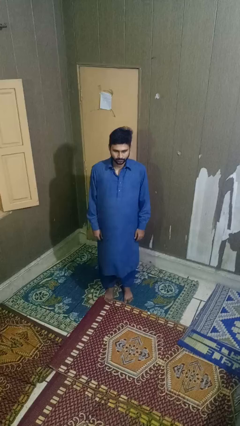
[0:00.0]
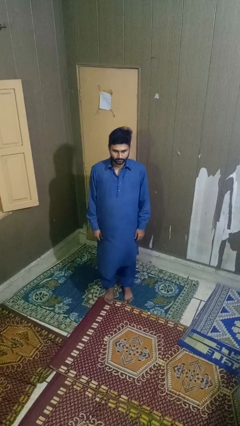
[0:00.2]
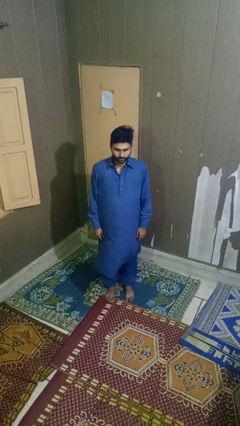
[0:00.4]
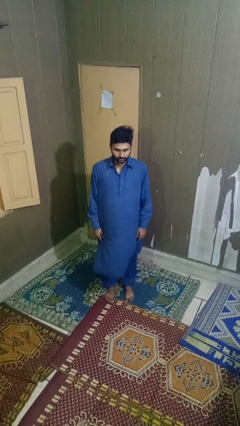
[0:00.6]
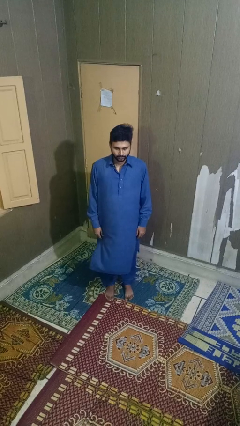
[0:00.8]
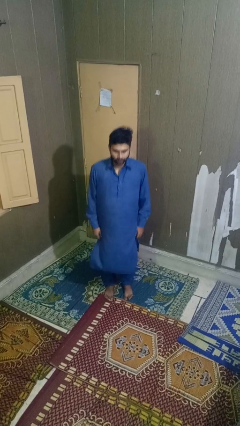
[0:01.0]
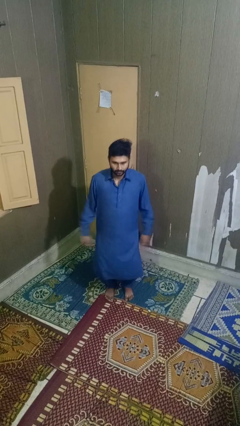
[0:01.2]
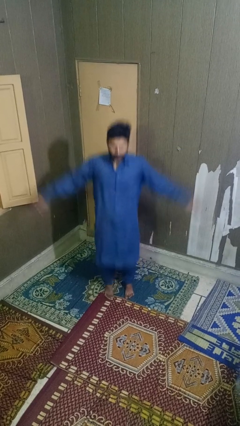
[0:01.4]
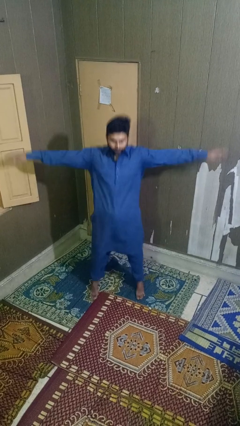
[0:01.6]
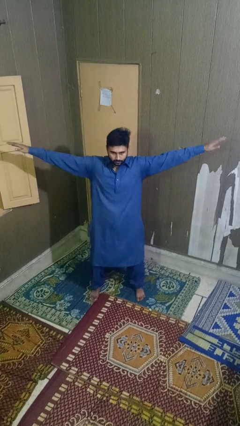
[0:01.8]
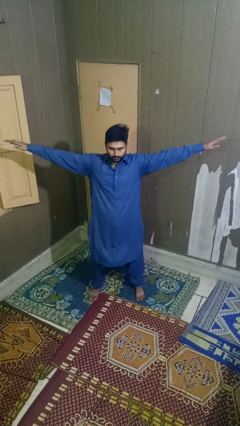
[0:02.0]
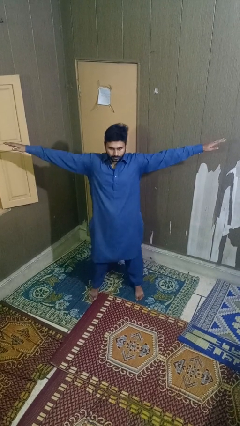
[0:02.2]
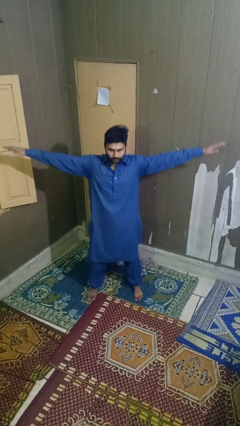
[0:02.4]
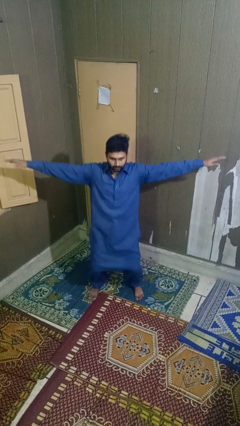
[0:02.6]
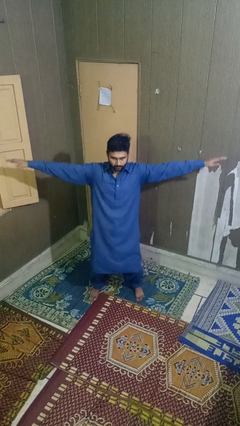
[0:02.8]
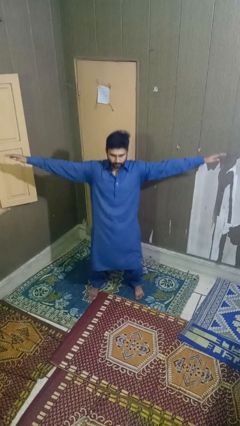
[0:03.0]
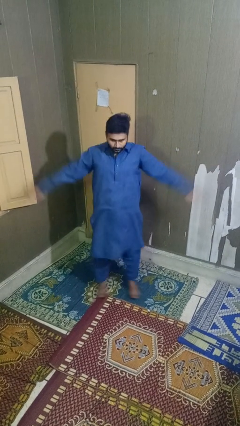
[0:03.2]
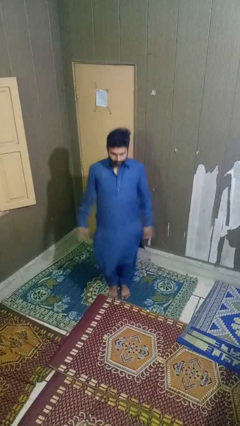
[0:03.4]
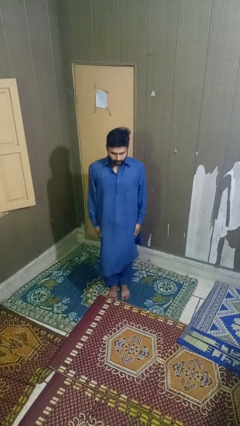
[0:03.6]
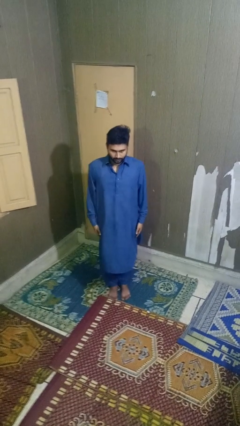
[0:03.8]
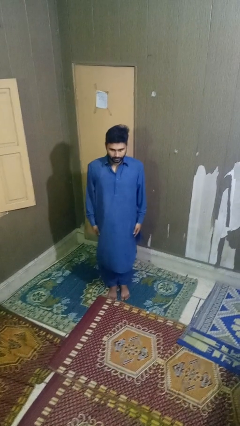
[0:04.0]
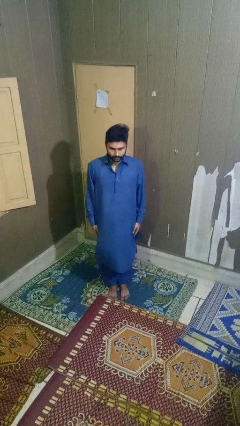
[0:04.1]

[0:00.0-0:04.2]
person exercises with jumping jacks

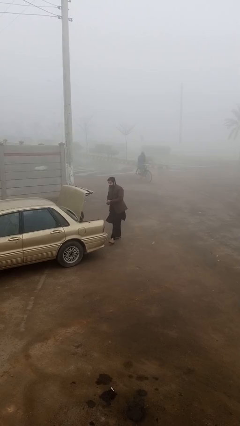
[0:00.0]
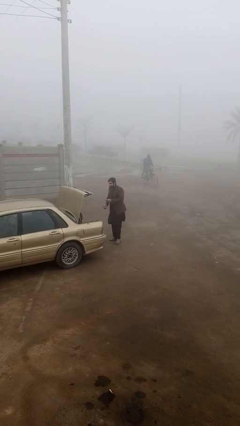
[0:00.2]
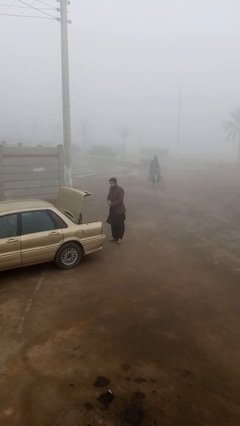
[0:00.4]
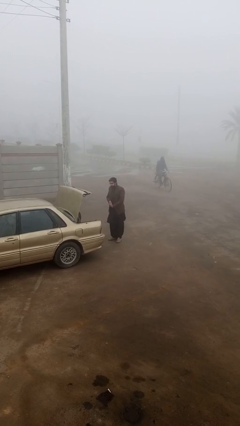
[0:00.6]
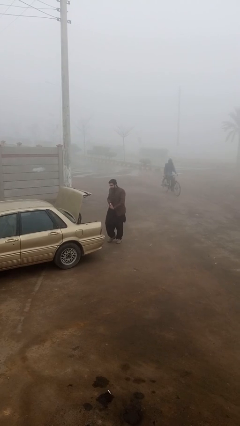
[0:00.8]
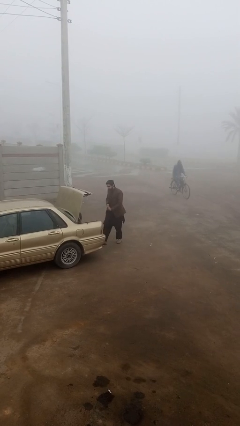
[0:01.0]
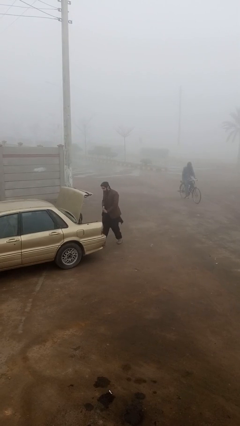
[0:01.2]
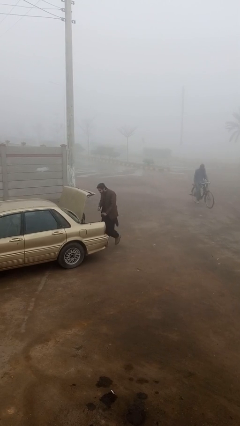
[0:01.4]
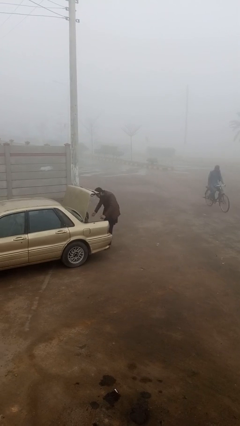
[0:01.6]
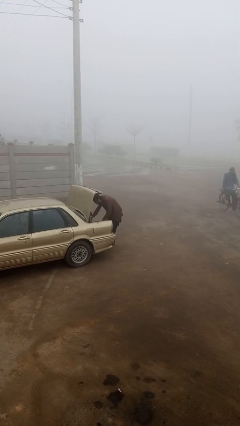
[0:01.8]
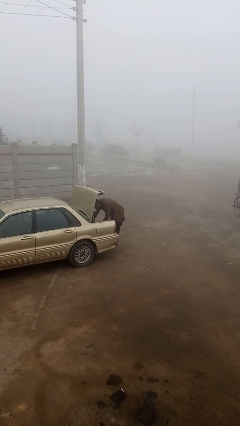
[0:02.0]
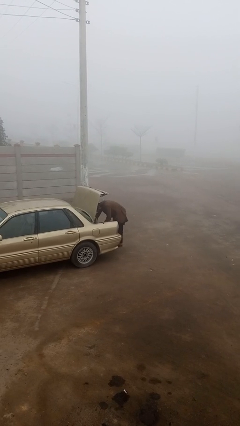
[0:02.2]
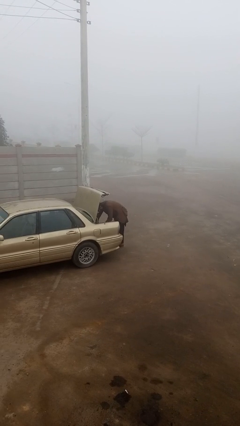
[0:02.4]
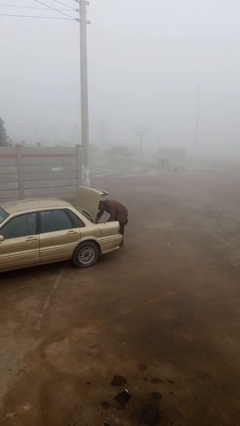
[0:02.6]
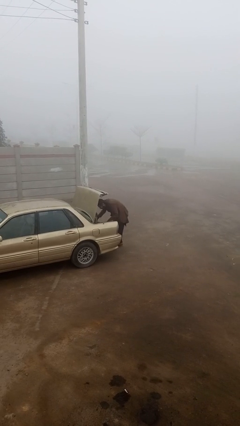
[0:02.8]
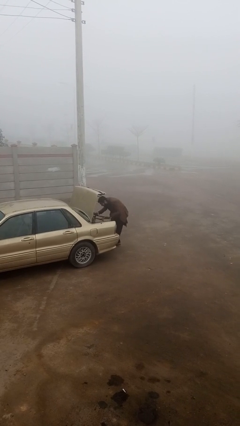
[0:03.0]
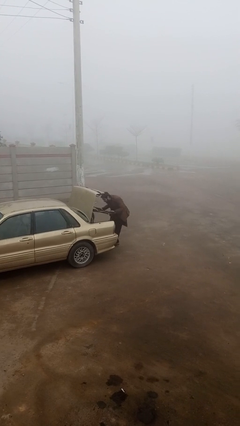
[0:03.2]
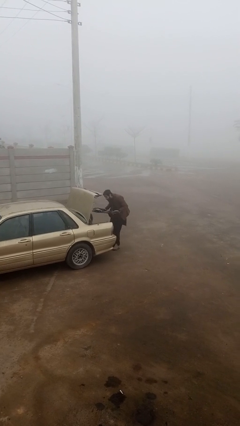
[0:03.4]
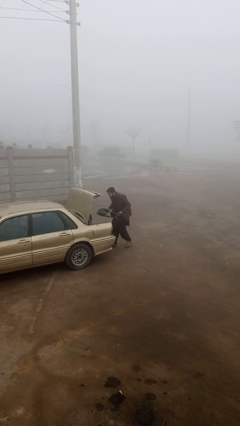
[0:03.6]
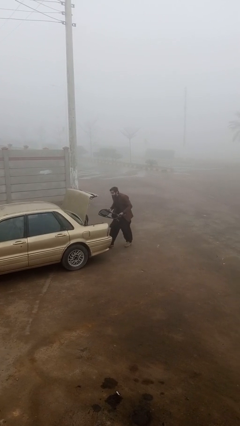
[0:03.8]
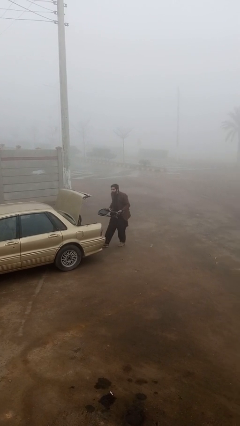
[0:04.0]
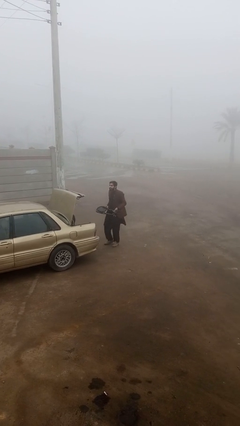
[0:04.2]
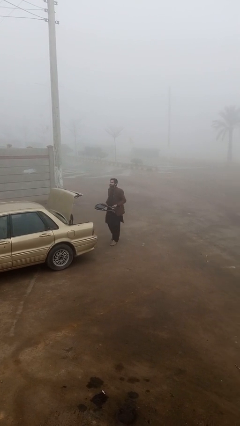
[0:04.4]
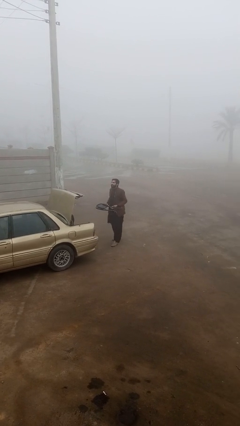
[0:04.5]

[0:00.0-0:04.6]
person unloads car

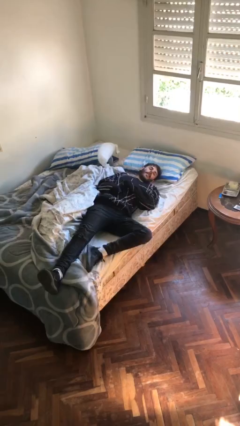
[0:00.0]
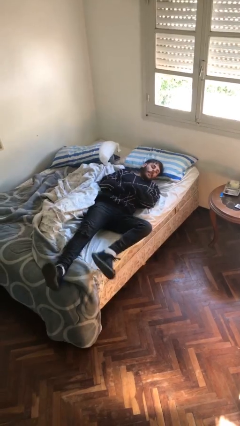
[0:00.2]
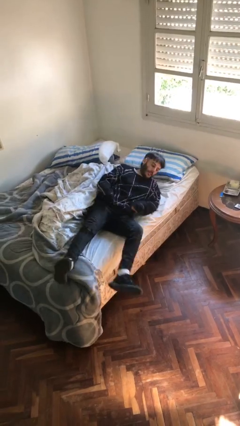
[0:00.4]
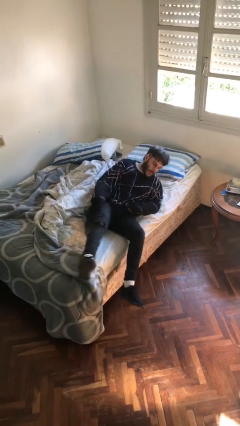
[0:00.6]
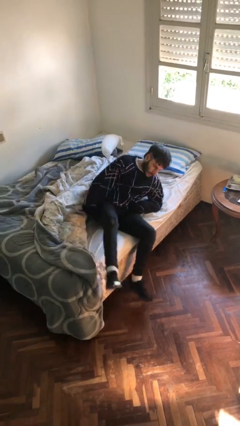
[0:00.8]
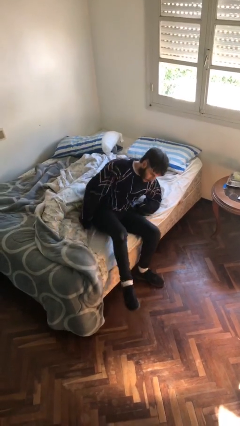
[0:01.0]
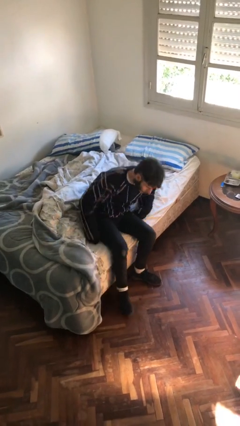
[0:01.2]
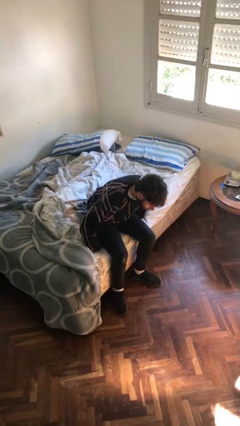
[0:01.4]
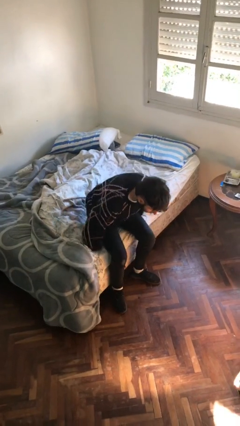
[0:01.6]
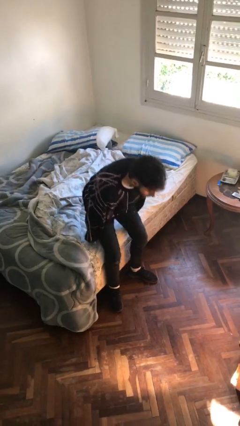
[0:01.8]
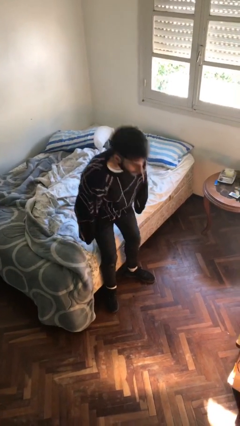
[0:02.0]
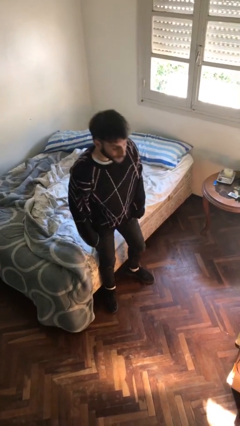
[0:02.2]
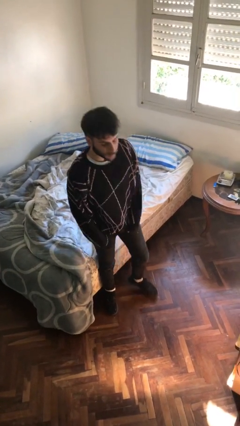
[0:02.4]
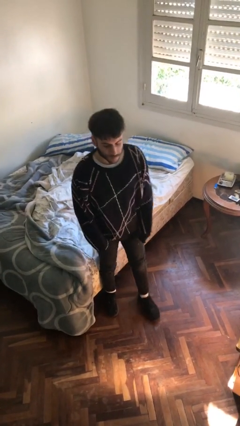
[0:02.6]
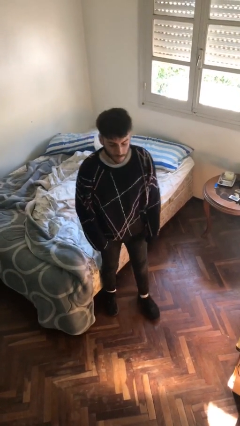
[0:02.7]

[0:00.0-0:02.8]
person stands up

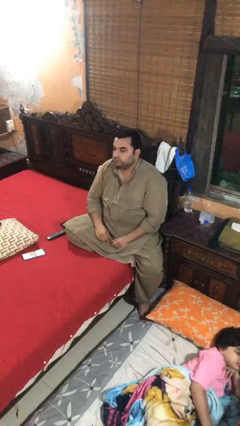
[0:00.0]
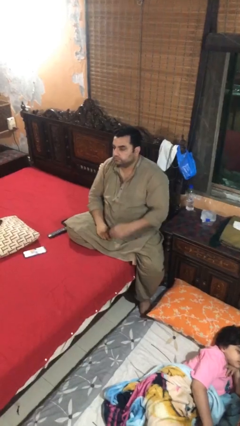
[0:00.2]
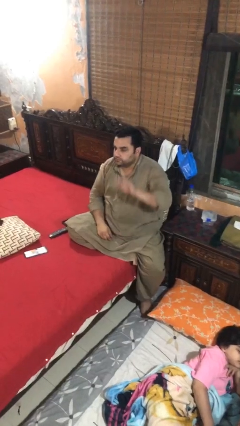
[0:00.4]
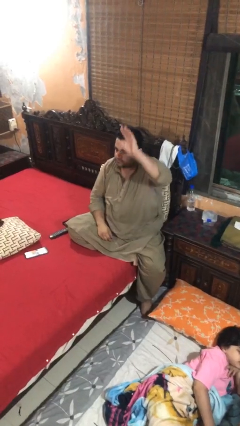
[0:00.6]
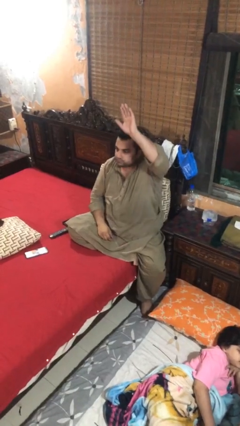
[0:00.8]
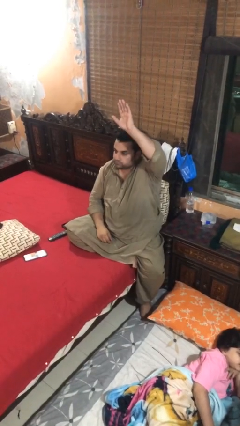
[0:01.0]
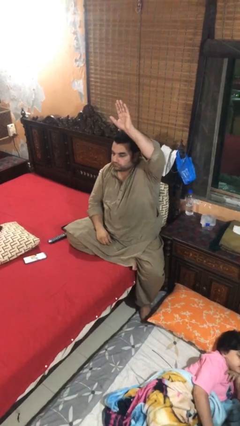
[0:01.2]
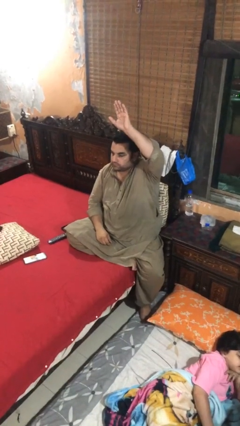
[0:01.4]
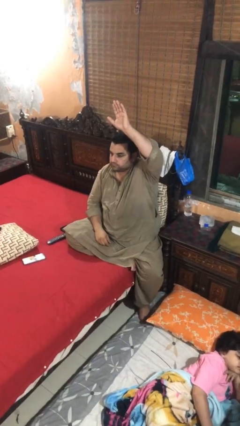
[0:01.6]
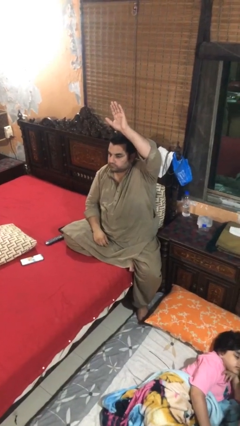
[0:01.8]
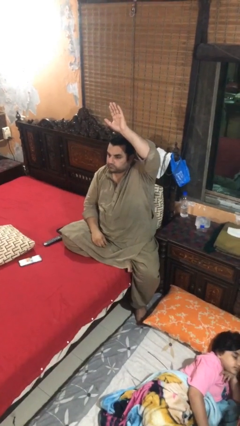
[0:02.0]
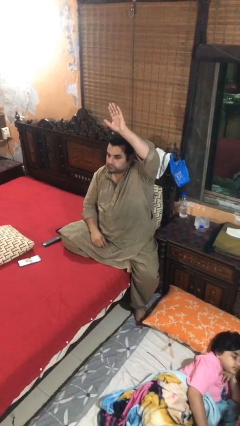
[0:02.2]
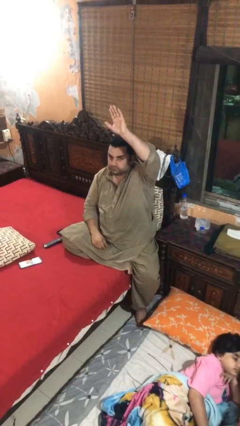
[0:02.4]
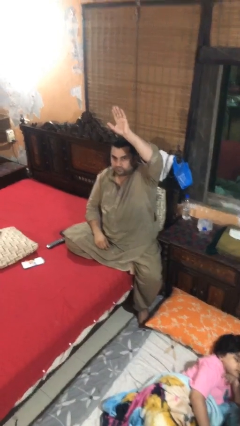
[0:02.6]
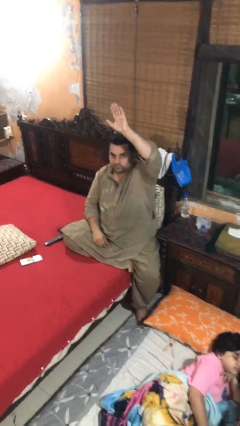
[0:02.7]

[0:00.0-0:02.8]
person gestures raise hand

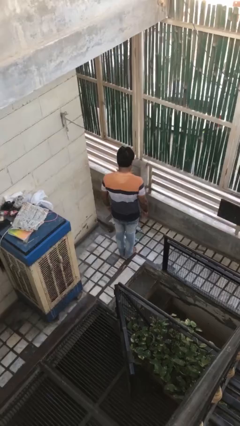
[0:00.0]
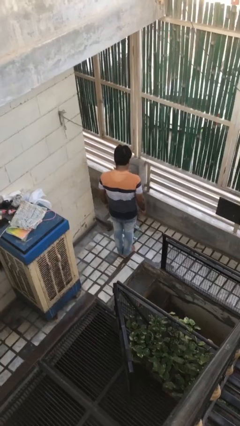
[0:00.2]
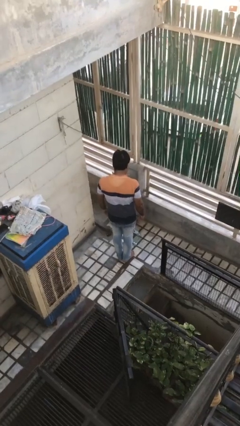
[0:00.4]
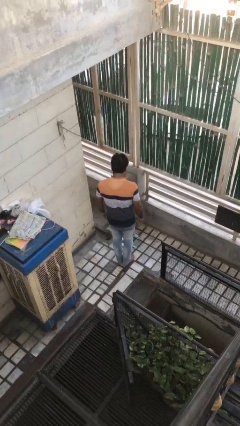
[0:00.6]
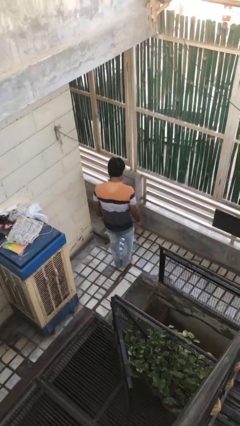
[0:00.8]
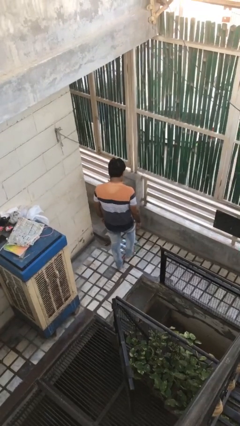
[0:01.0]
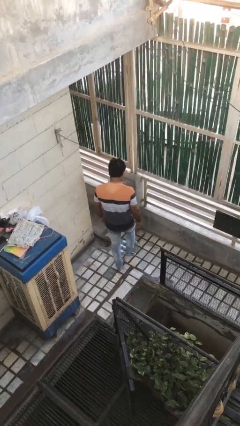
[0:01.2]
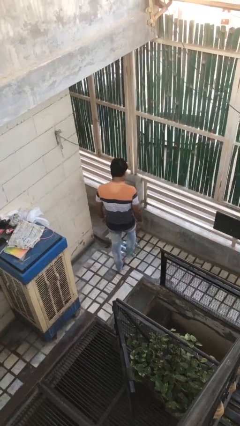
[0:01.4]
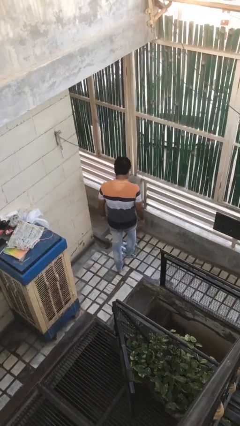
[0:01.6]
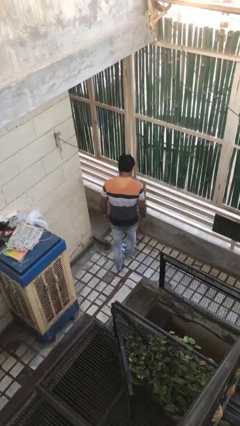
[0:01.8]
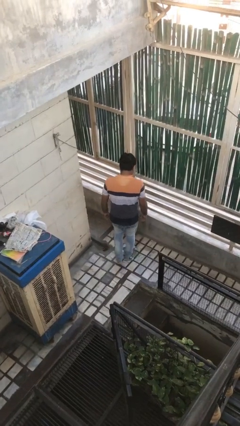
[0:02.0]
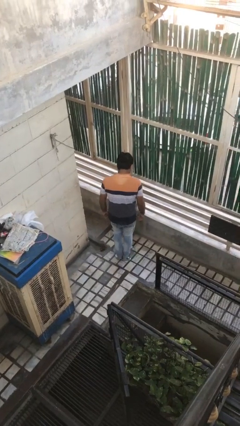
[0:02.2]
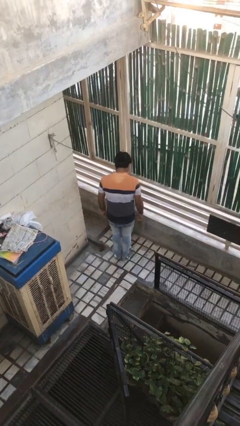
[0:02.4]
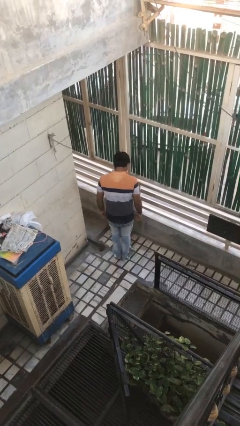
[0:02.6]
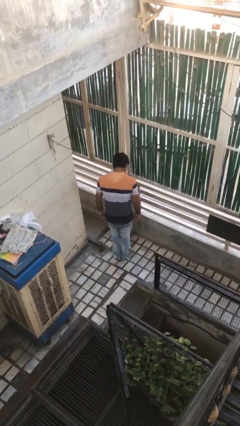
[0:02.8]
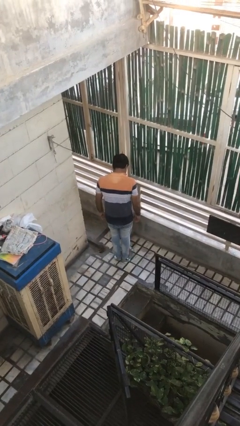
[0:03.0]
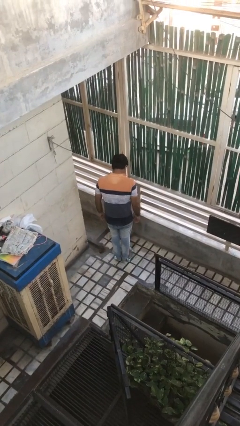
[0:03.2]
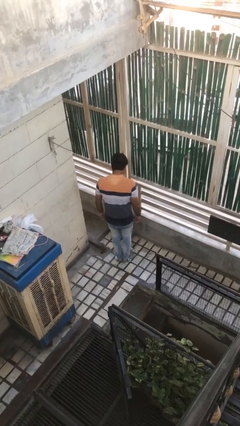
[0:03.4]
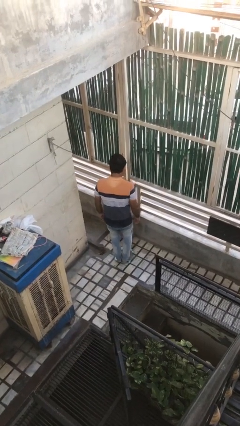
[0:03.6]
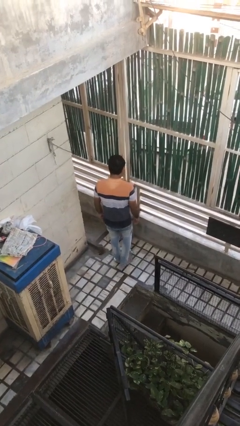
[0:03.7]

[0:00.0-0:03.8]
person uses bodyweight scale
